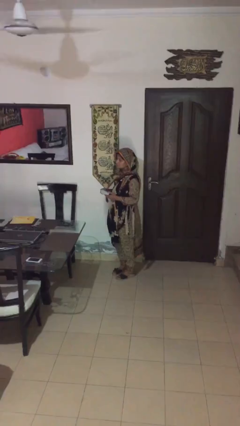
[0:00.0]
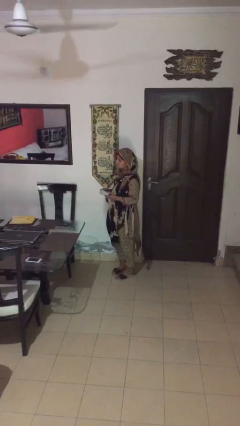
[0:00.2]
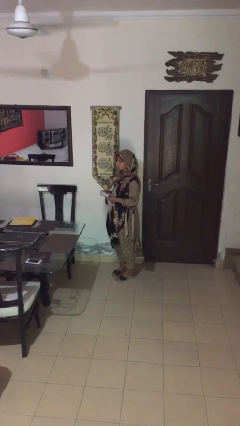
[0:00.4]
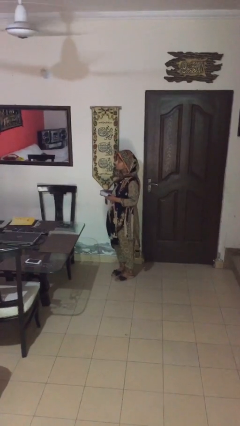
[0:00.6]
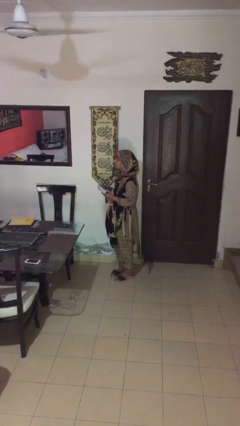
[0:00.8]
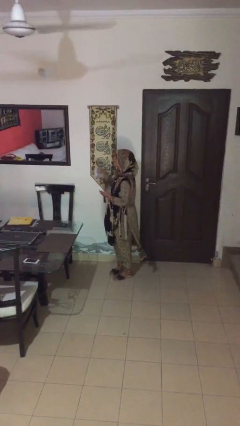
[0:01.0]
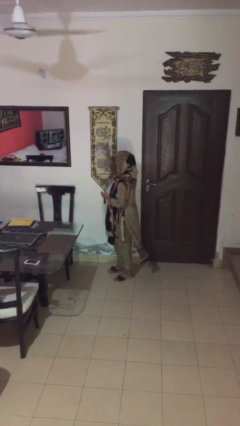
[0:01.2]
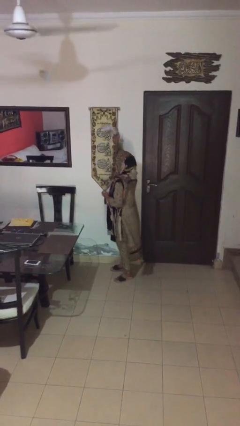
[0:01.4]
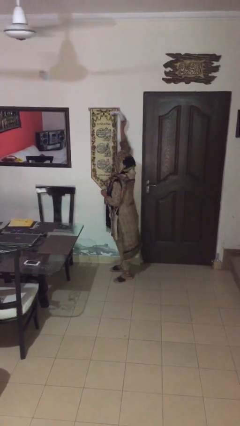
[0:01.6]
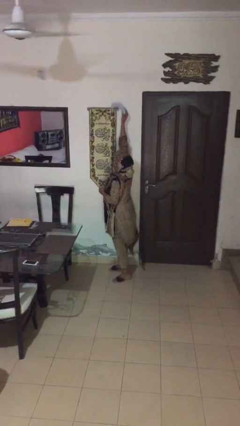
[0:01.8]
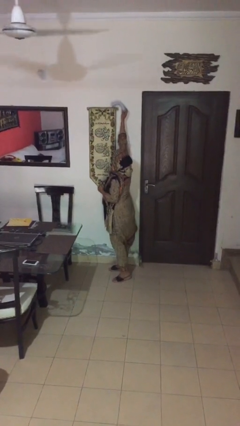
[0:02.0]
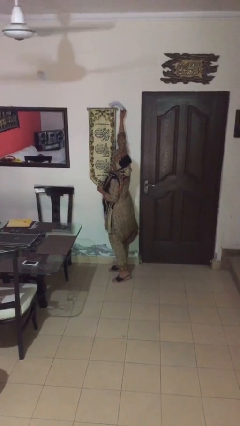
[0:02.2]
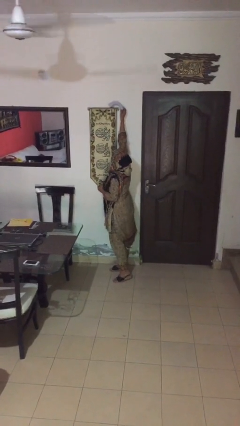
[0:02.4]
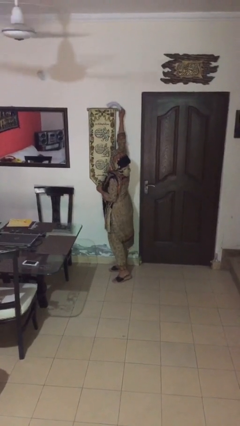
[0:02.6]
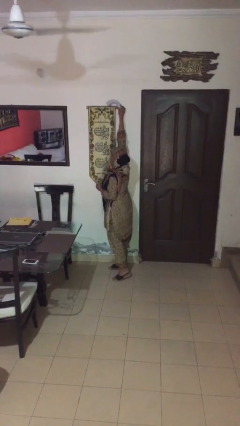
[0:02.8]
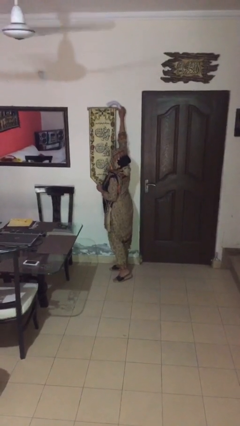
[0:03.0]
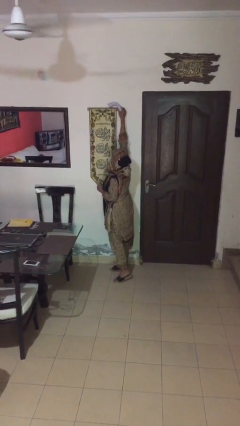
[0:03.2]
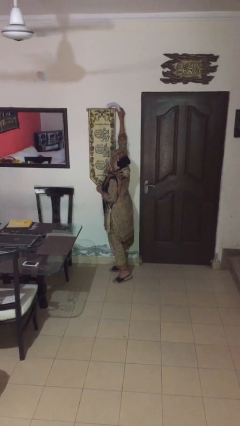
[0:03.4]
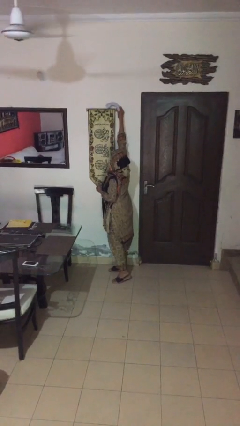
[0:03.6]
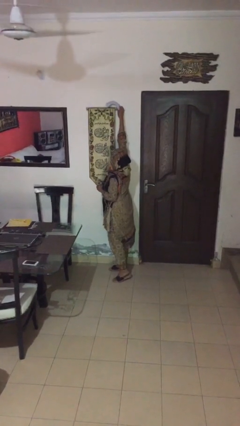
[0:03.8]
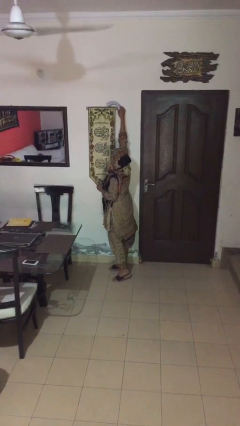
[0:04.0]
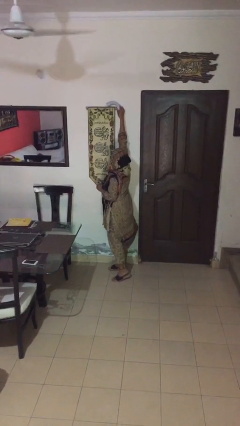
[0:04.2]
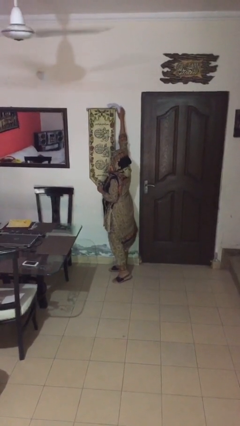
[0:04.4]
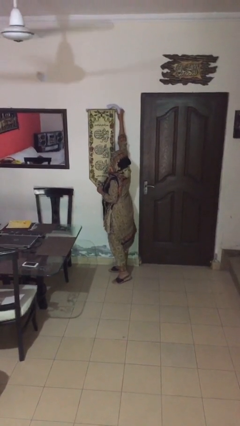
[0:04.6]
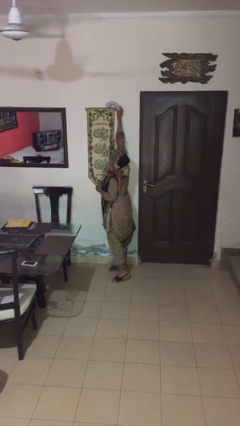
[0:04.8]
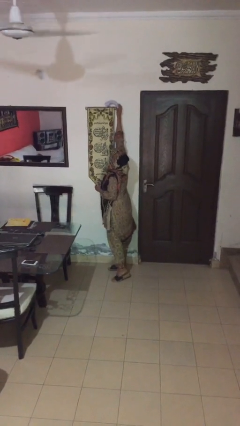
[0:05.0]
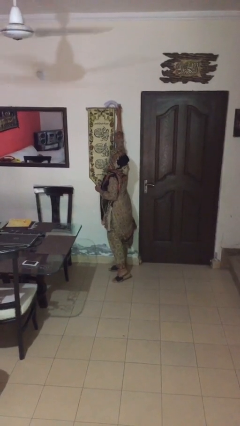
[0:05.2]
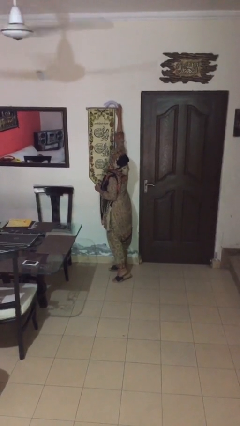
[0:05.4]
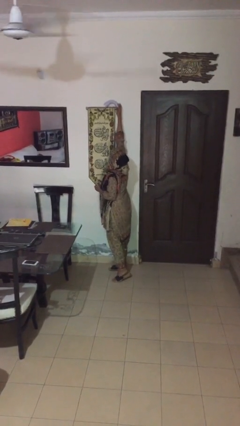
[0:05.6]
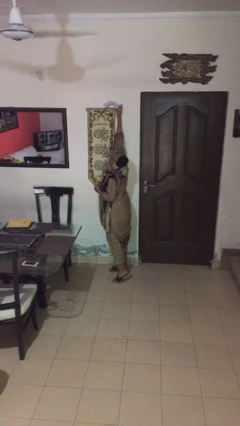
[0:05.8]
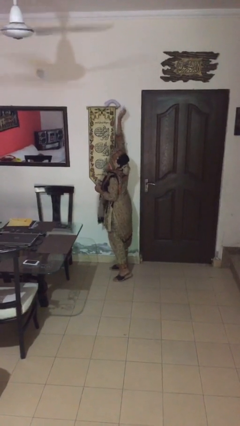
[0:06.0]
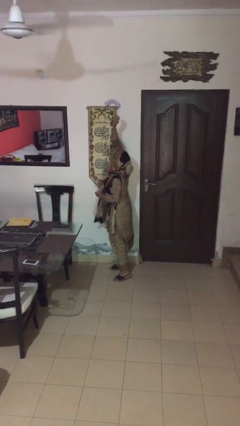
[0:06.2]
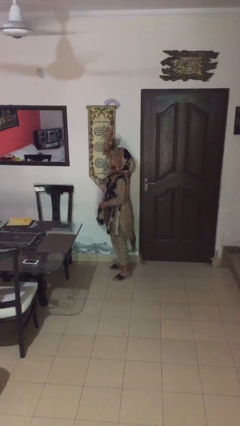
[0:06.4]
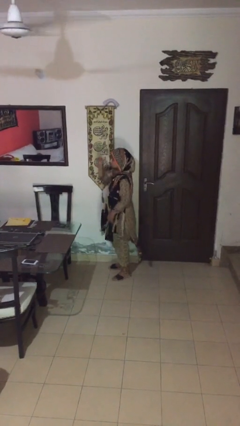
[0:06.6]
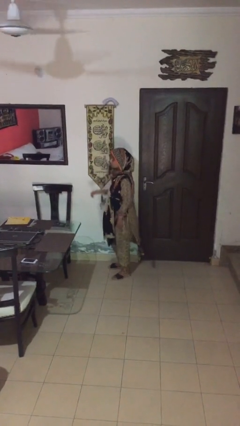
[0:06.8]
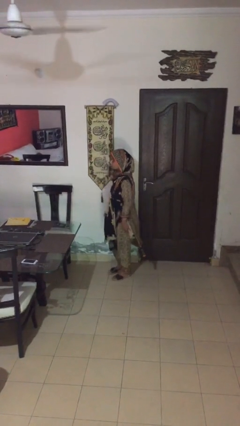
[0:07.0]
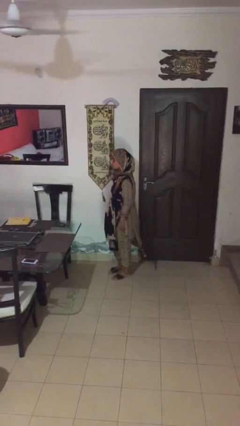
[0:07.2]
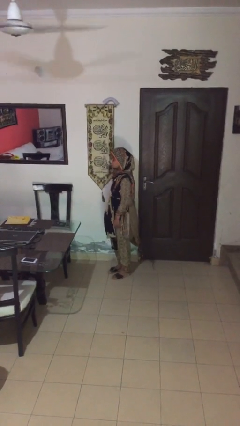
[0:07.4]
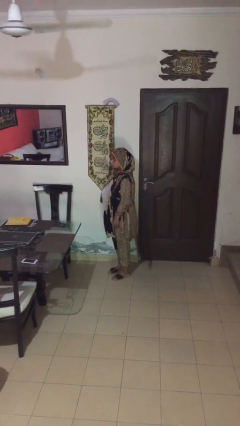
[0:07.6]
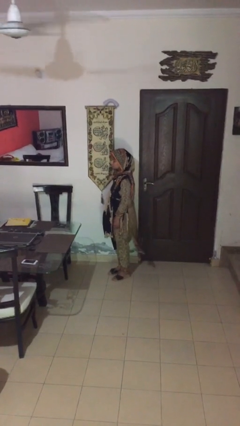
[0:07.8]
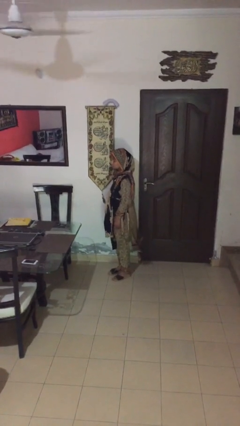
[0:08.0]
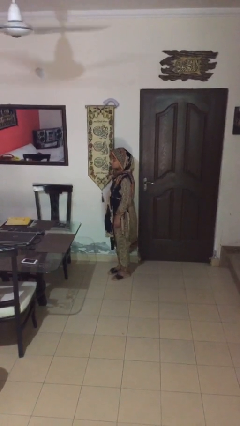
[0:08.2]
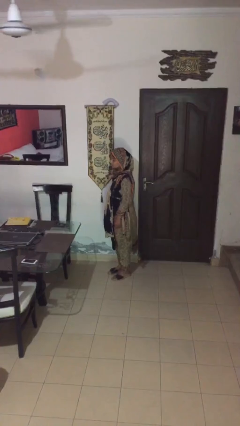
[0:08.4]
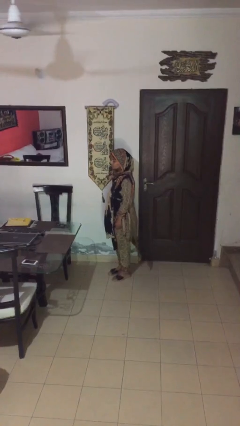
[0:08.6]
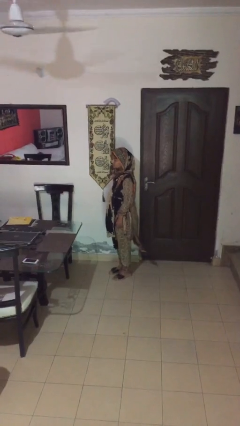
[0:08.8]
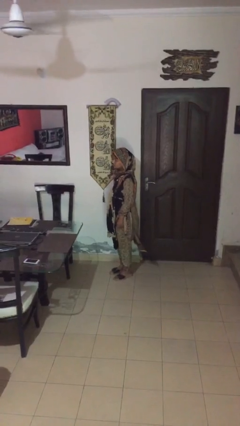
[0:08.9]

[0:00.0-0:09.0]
person puts down object on shelf

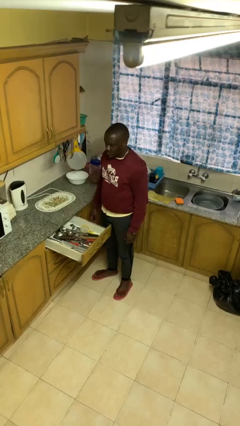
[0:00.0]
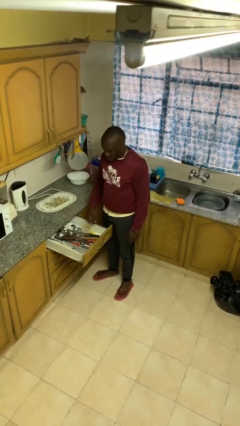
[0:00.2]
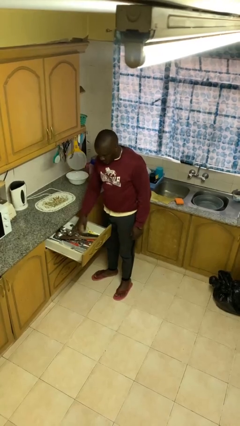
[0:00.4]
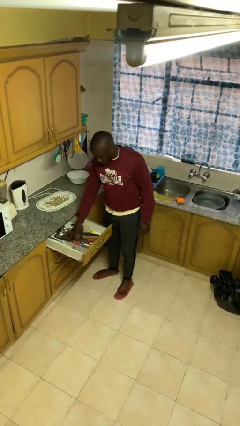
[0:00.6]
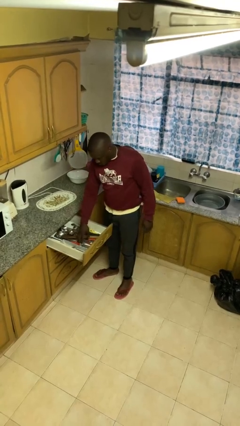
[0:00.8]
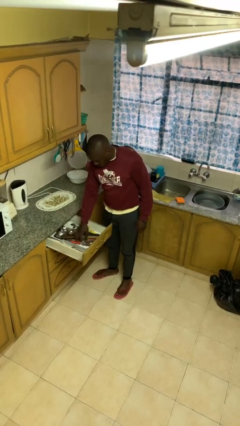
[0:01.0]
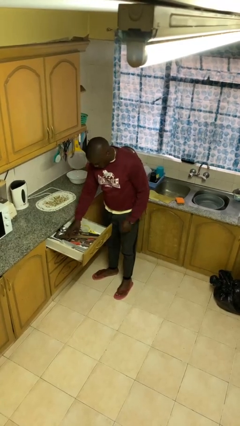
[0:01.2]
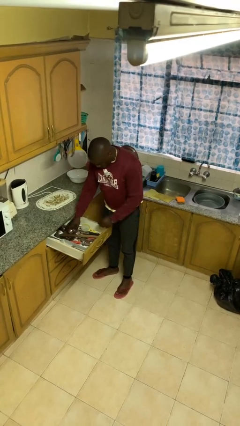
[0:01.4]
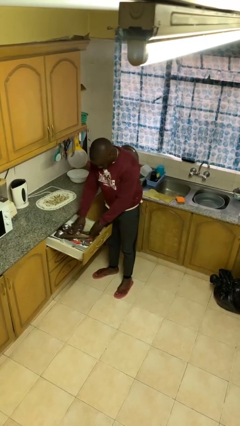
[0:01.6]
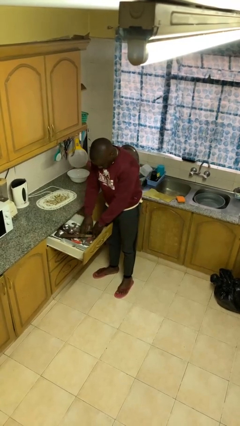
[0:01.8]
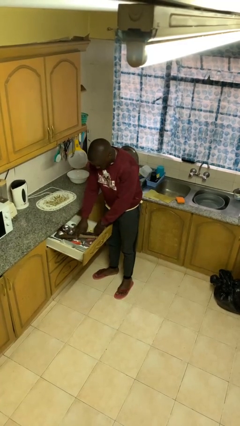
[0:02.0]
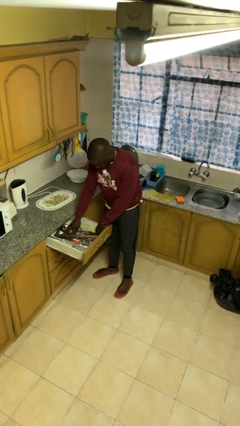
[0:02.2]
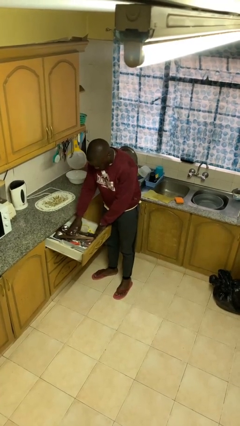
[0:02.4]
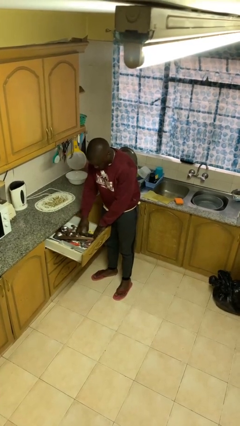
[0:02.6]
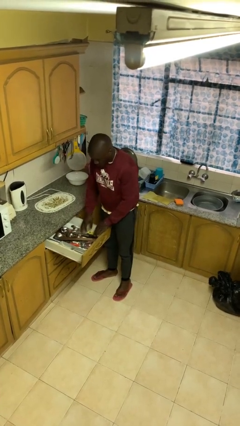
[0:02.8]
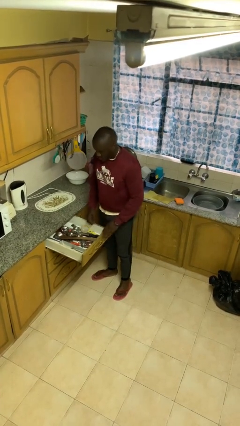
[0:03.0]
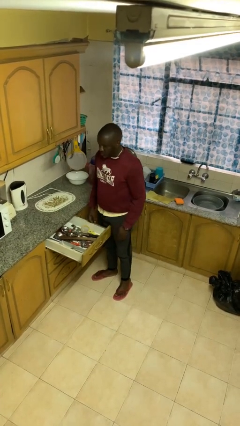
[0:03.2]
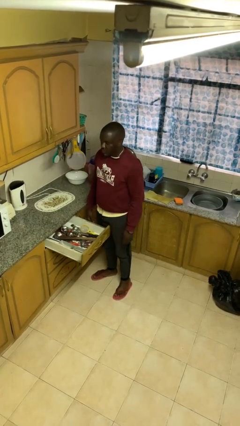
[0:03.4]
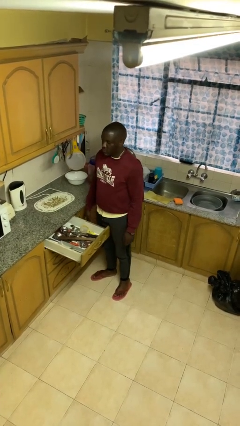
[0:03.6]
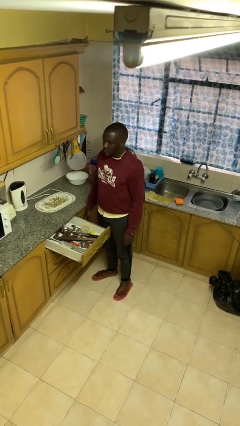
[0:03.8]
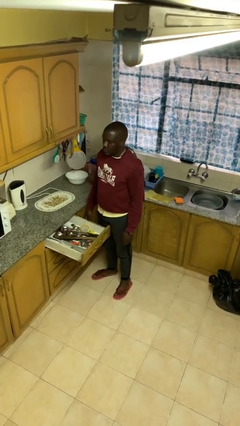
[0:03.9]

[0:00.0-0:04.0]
person searches in kitchen drawer

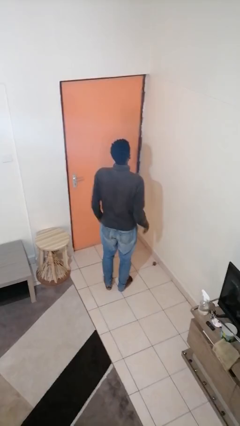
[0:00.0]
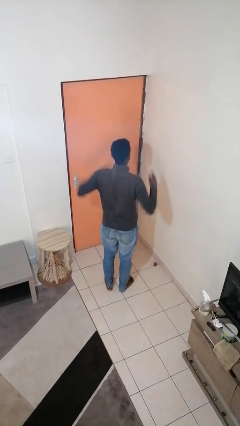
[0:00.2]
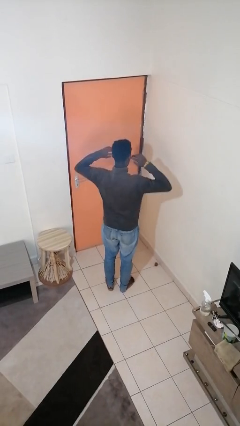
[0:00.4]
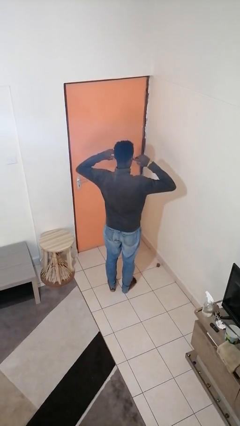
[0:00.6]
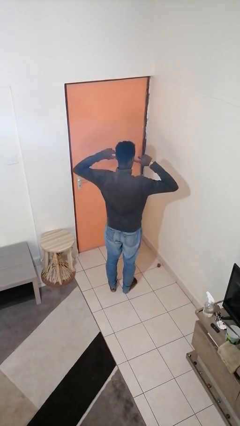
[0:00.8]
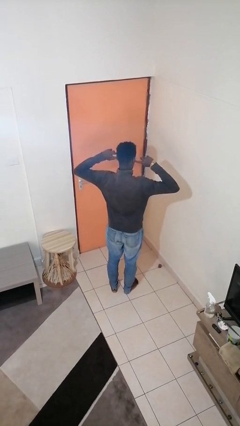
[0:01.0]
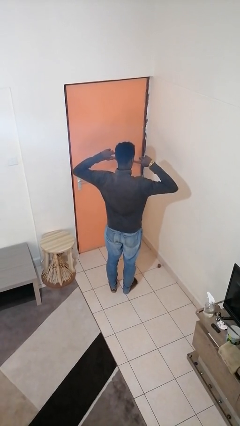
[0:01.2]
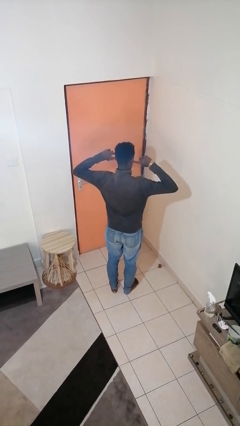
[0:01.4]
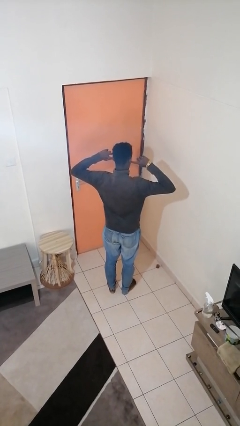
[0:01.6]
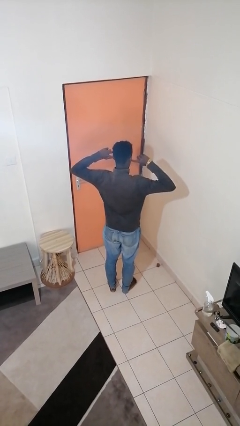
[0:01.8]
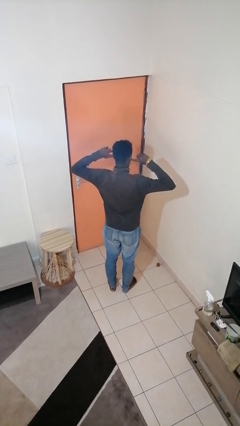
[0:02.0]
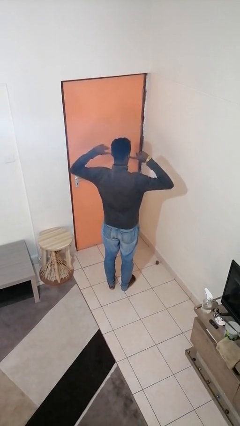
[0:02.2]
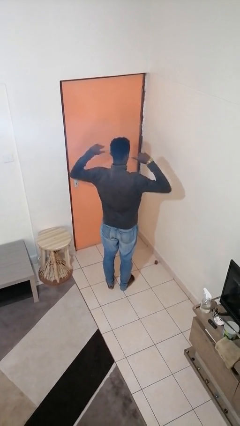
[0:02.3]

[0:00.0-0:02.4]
person puts fingers in ear
